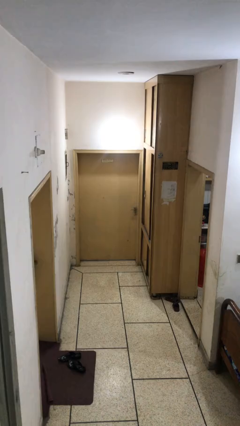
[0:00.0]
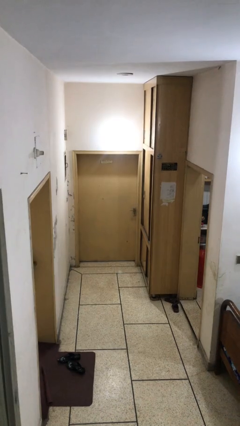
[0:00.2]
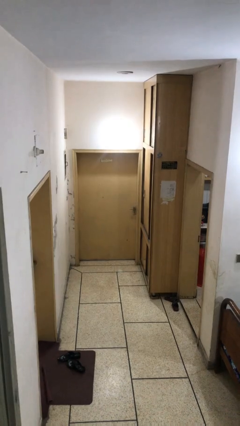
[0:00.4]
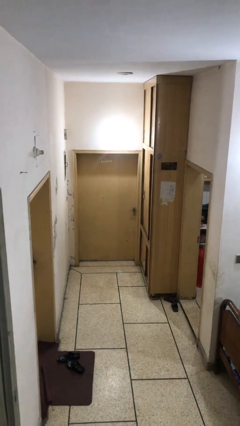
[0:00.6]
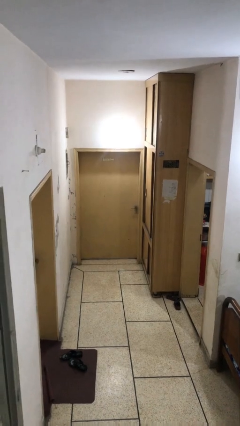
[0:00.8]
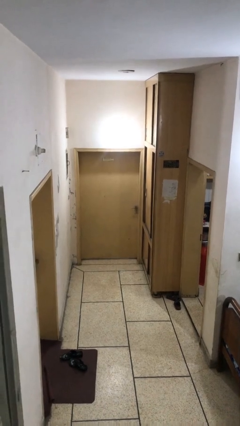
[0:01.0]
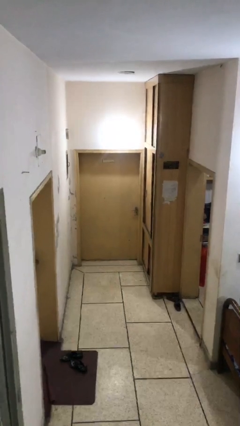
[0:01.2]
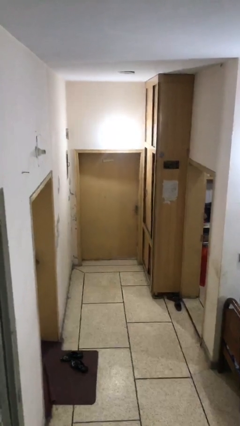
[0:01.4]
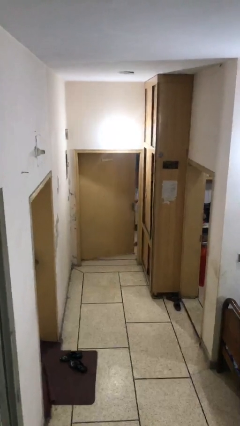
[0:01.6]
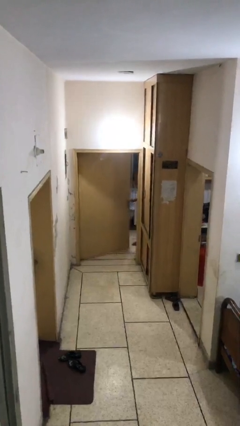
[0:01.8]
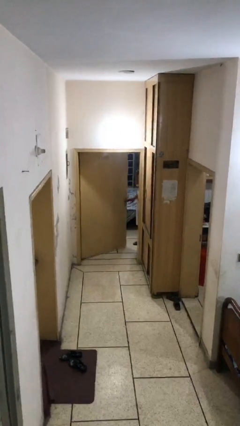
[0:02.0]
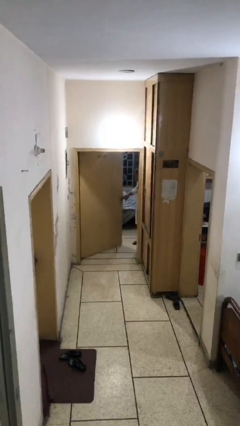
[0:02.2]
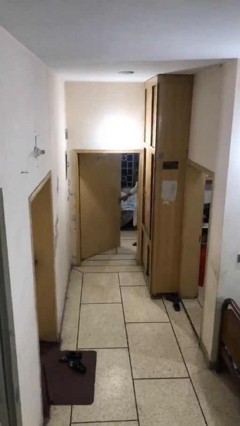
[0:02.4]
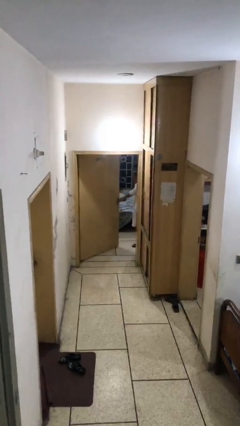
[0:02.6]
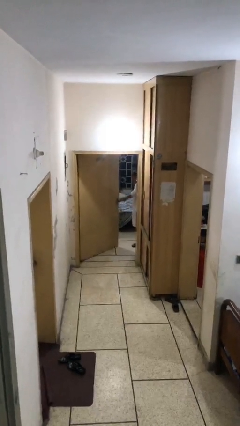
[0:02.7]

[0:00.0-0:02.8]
person opens facility door

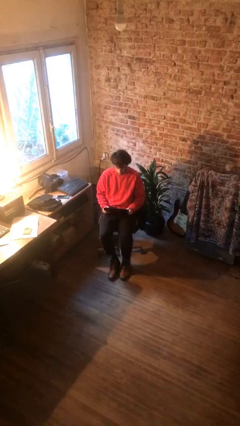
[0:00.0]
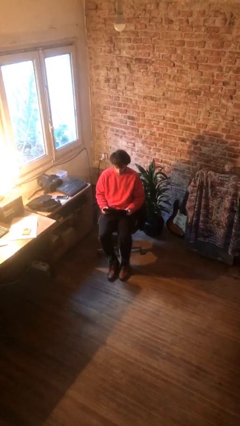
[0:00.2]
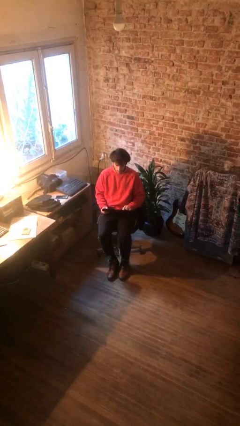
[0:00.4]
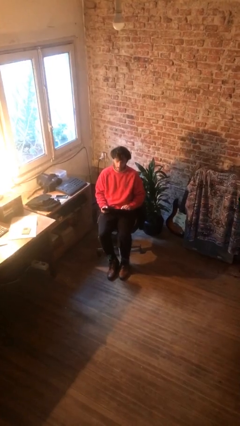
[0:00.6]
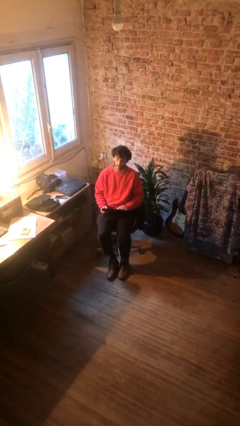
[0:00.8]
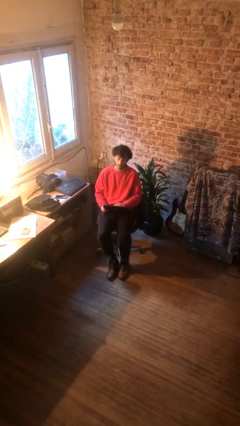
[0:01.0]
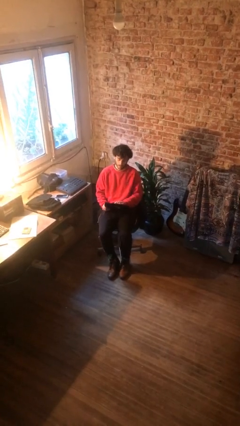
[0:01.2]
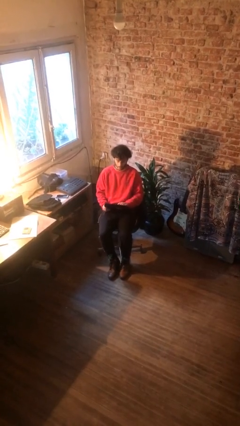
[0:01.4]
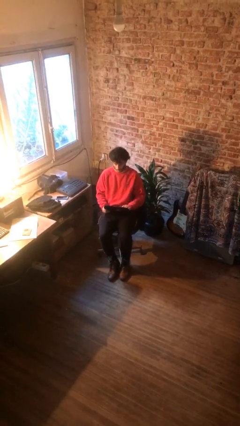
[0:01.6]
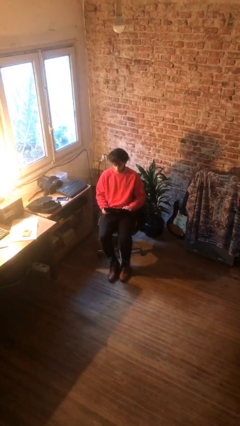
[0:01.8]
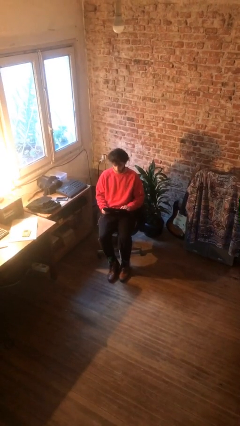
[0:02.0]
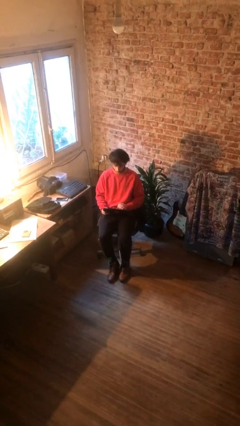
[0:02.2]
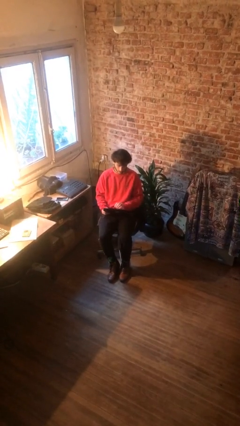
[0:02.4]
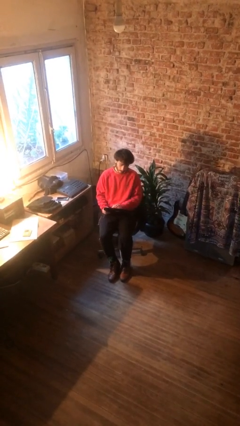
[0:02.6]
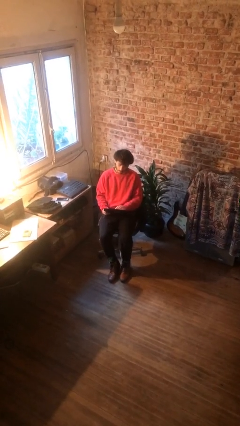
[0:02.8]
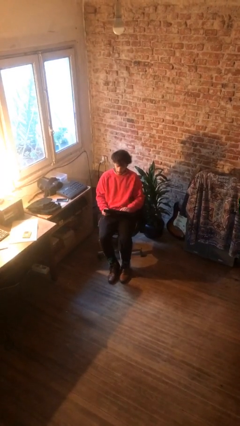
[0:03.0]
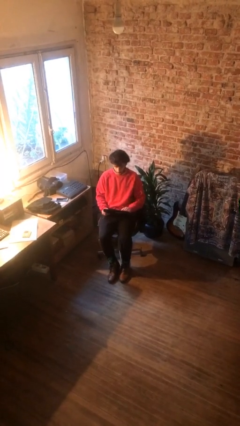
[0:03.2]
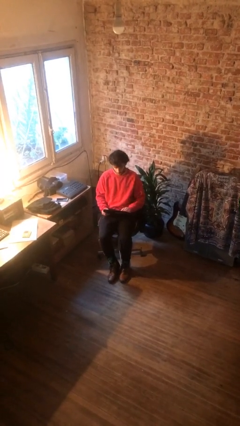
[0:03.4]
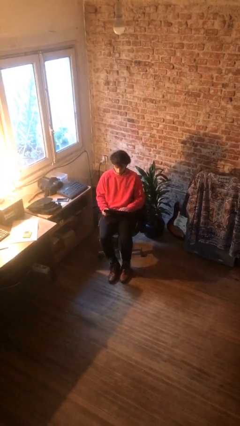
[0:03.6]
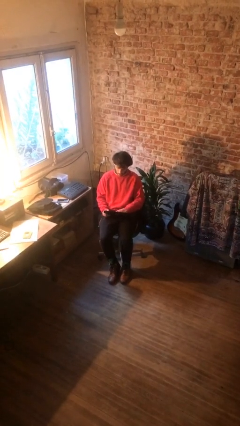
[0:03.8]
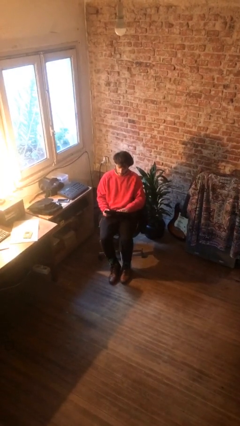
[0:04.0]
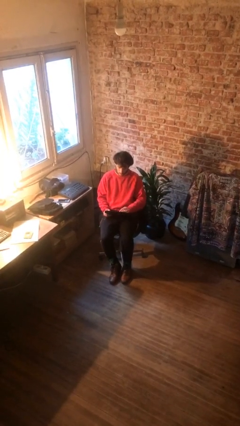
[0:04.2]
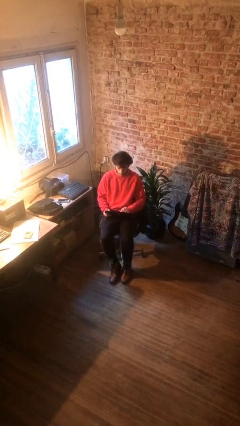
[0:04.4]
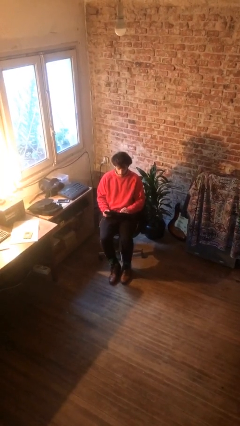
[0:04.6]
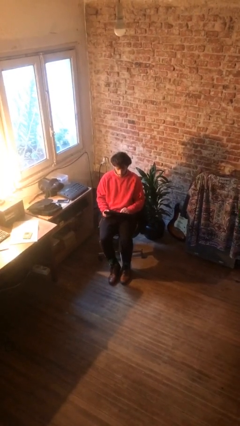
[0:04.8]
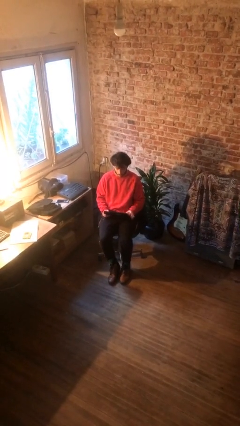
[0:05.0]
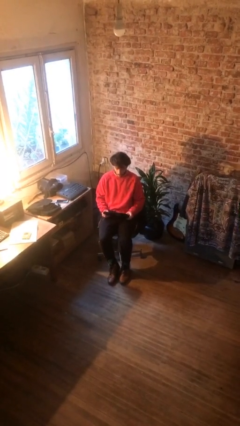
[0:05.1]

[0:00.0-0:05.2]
person interacts with tablet

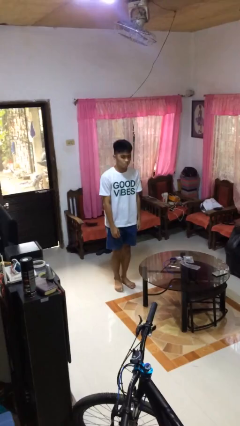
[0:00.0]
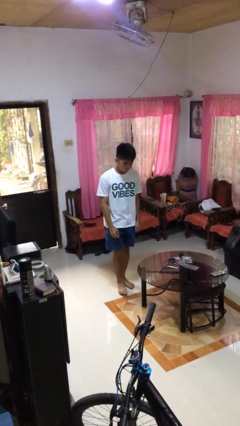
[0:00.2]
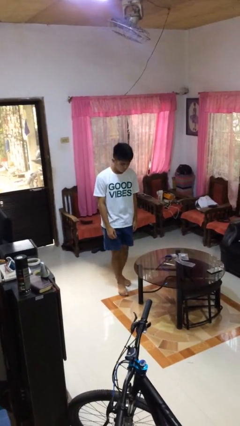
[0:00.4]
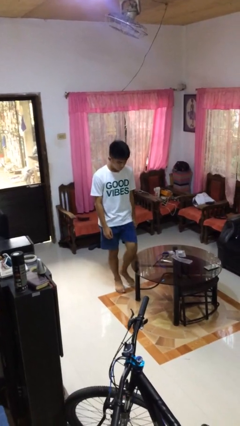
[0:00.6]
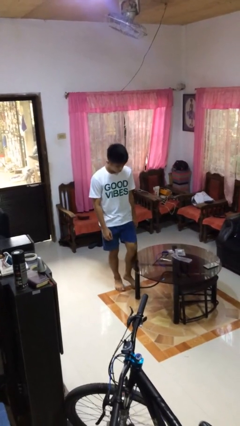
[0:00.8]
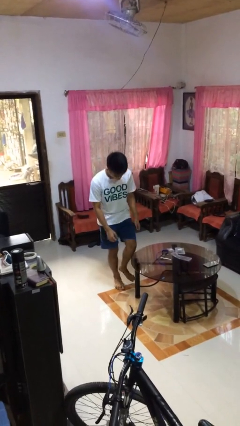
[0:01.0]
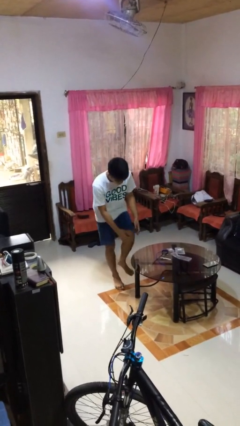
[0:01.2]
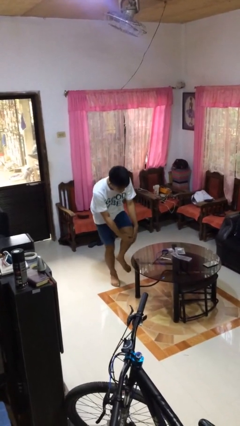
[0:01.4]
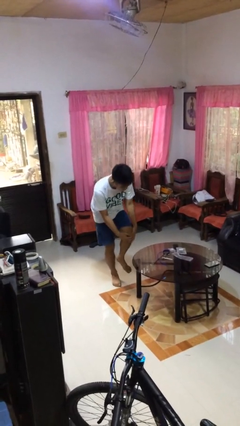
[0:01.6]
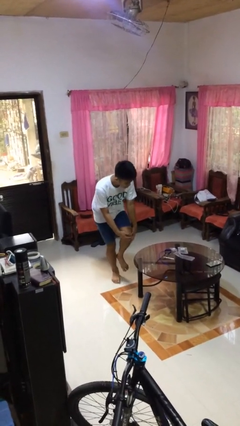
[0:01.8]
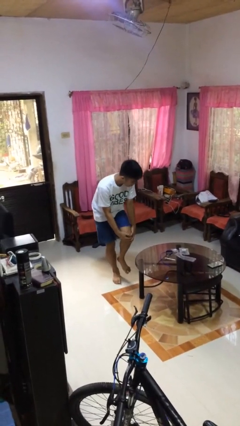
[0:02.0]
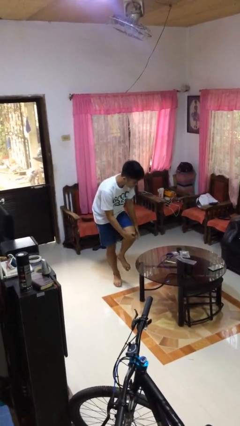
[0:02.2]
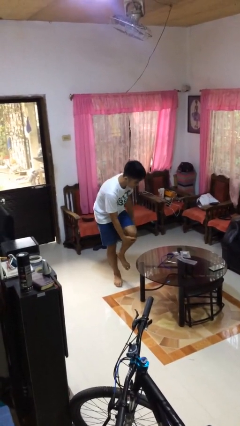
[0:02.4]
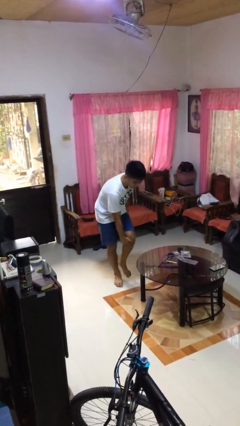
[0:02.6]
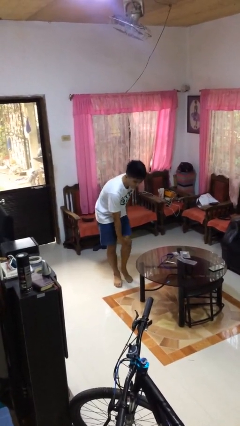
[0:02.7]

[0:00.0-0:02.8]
person bumps into table

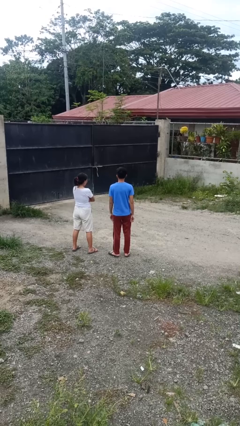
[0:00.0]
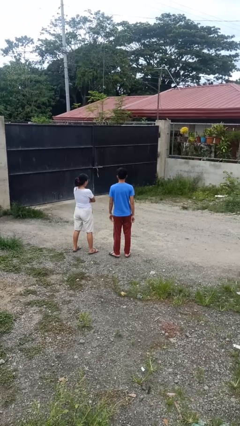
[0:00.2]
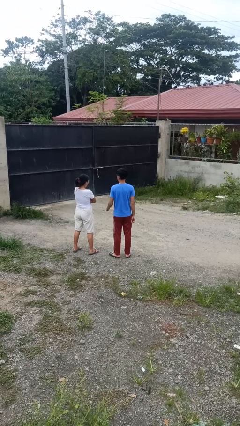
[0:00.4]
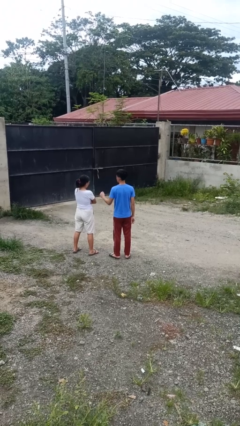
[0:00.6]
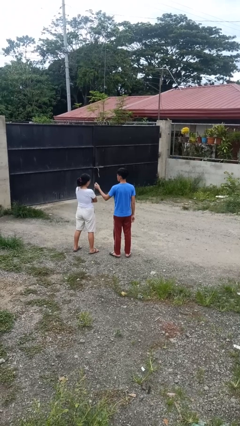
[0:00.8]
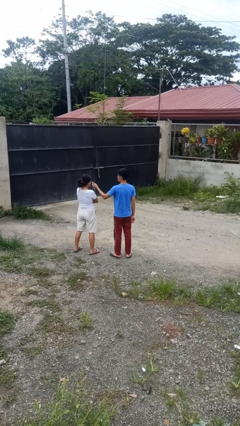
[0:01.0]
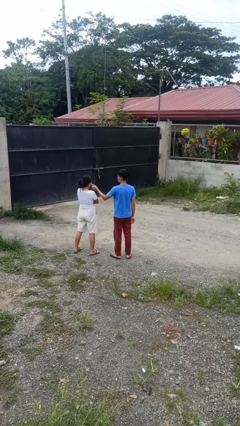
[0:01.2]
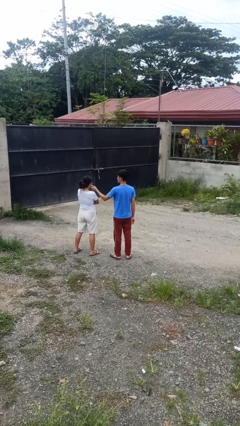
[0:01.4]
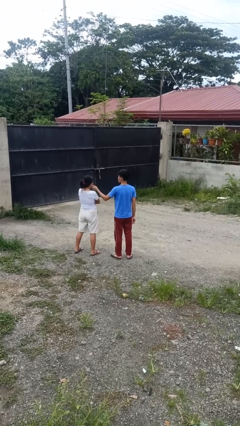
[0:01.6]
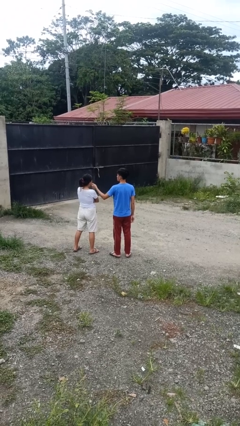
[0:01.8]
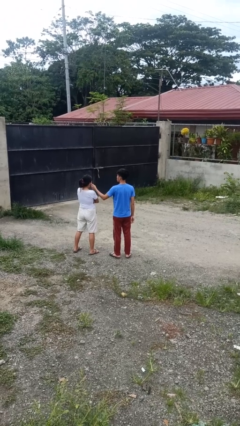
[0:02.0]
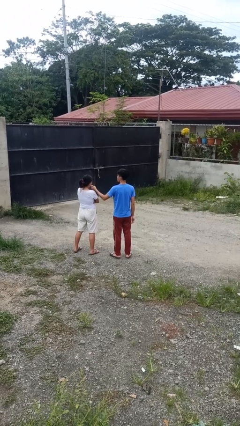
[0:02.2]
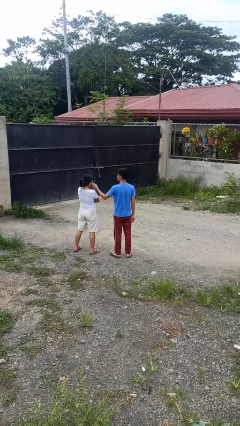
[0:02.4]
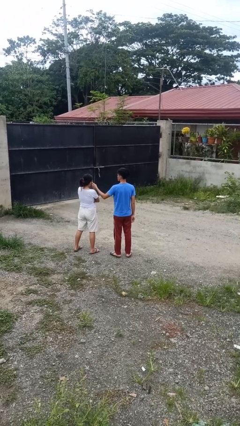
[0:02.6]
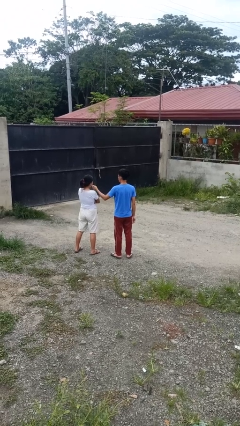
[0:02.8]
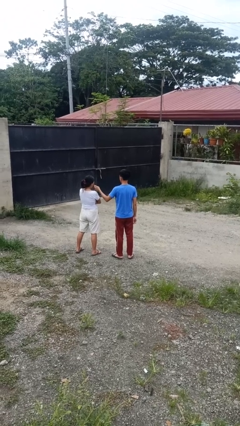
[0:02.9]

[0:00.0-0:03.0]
person touches face of person

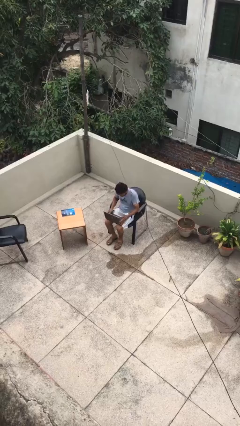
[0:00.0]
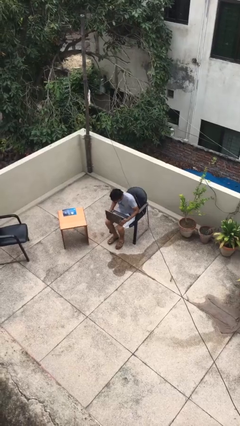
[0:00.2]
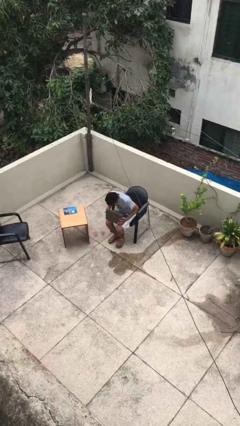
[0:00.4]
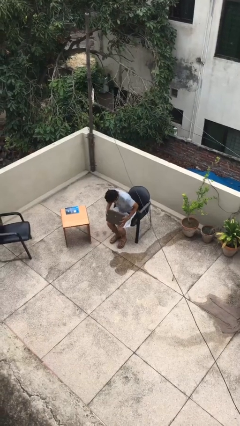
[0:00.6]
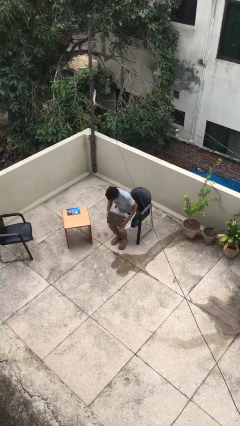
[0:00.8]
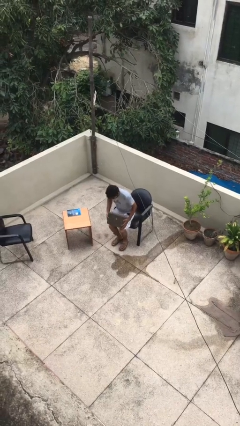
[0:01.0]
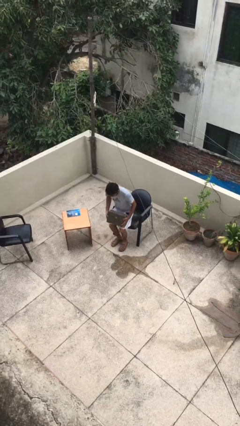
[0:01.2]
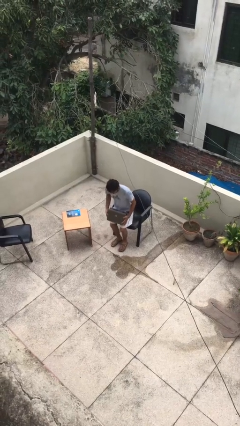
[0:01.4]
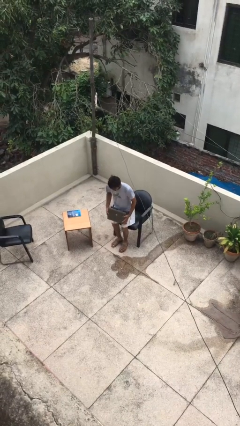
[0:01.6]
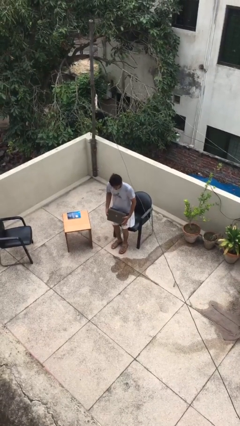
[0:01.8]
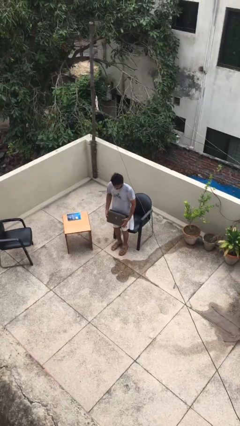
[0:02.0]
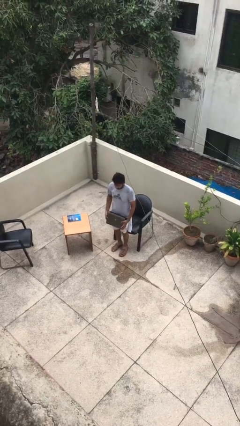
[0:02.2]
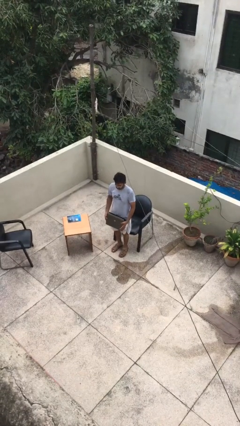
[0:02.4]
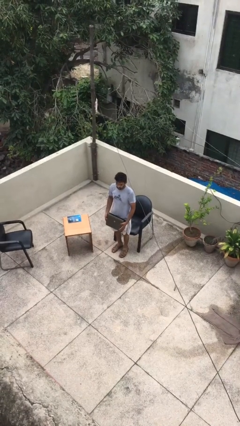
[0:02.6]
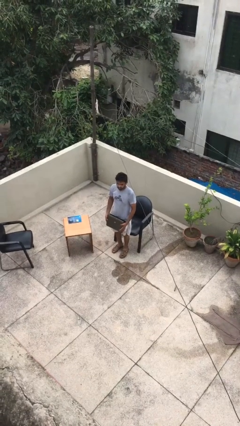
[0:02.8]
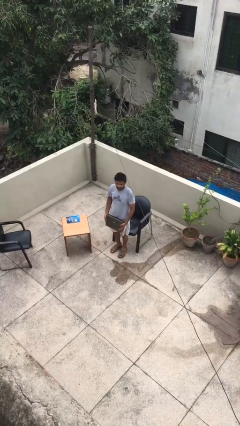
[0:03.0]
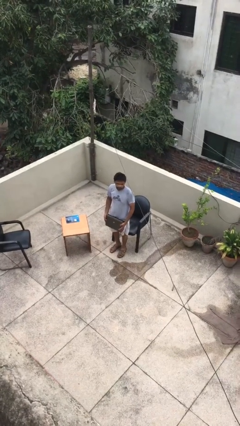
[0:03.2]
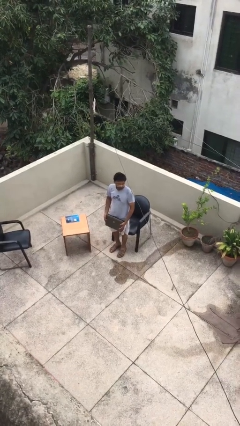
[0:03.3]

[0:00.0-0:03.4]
person stands up

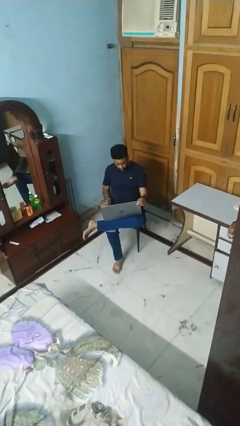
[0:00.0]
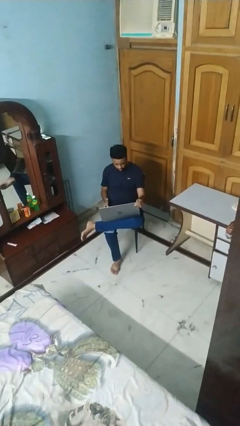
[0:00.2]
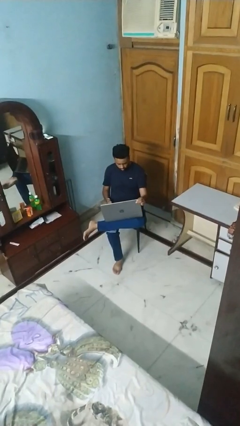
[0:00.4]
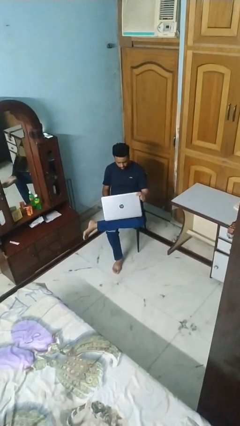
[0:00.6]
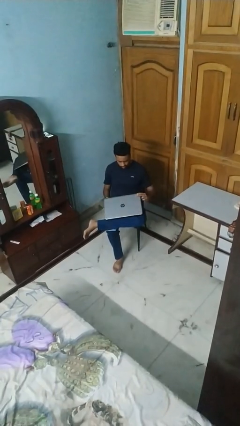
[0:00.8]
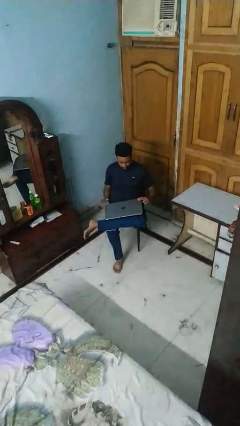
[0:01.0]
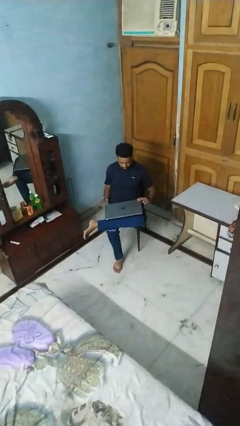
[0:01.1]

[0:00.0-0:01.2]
person closes laptop
